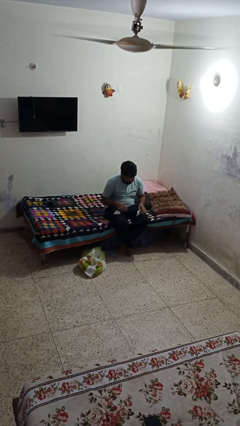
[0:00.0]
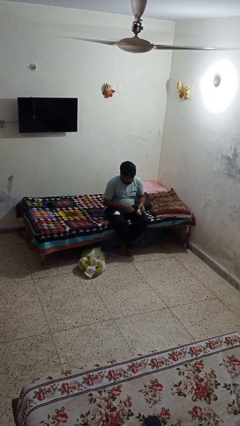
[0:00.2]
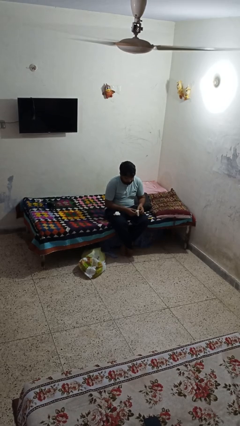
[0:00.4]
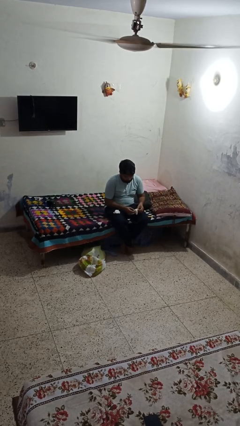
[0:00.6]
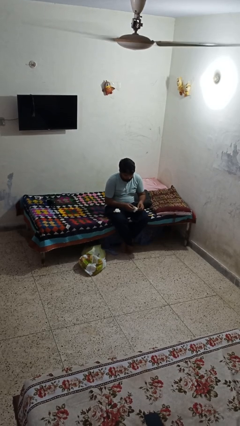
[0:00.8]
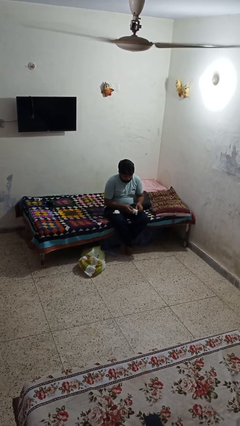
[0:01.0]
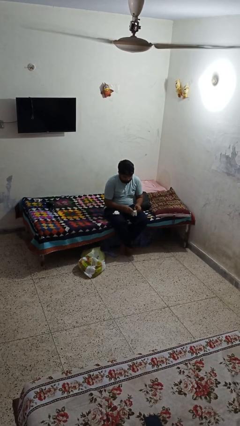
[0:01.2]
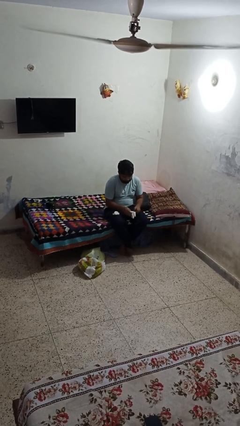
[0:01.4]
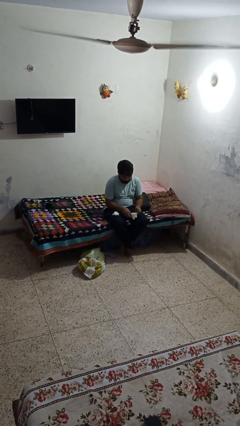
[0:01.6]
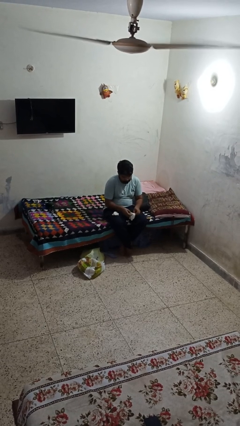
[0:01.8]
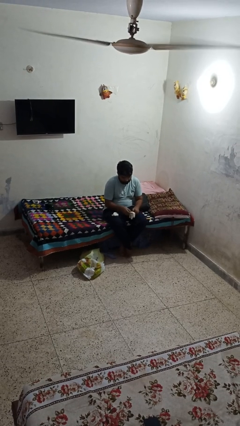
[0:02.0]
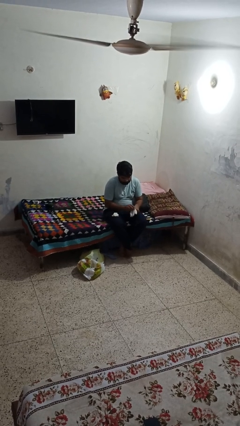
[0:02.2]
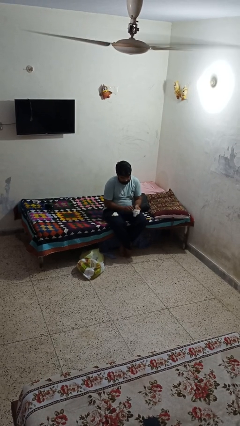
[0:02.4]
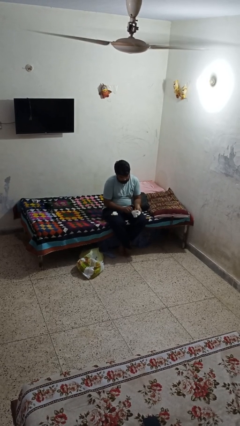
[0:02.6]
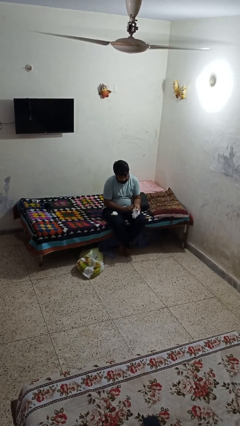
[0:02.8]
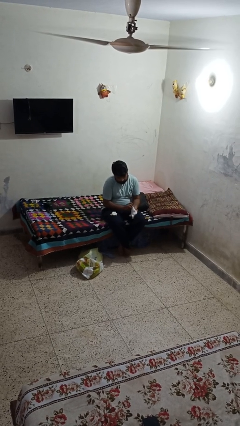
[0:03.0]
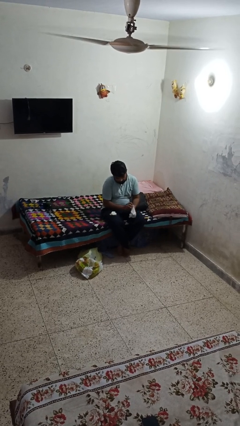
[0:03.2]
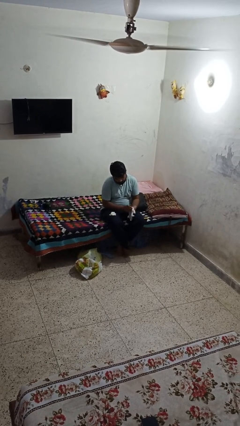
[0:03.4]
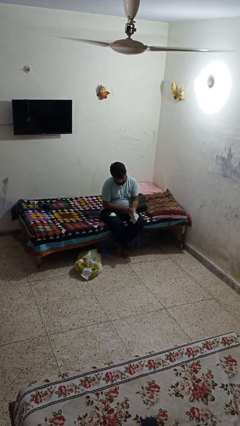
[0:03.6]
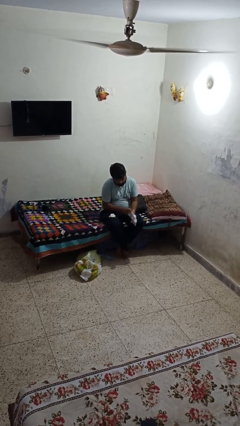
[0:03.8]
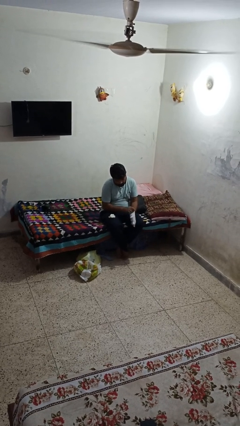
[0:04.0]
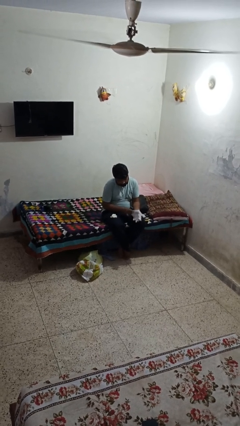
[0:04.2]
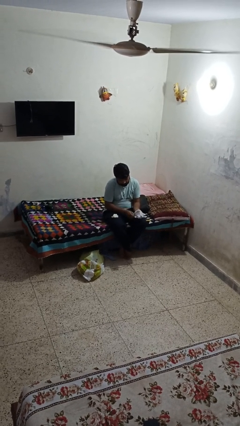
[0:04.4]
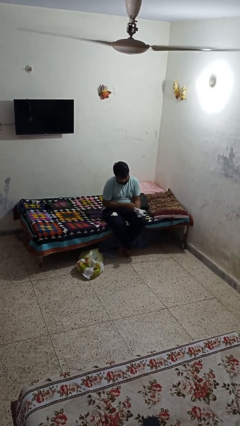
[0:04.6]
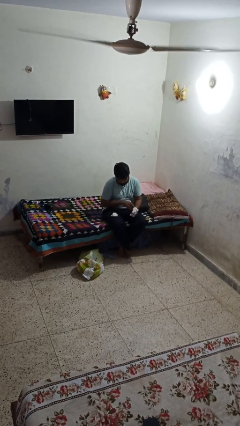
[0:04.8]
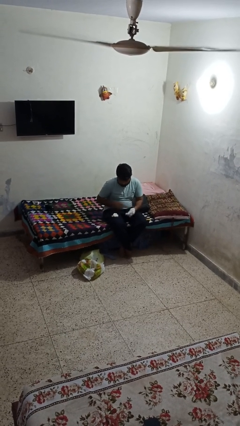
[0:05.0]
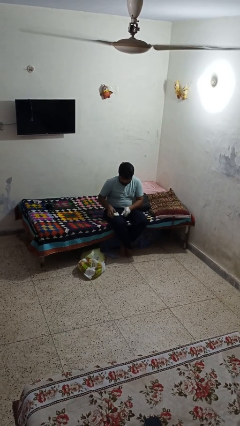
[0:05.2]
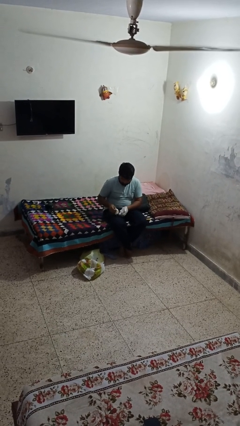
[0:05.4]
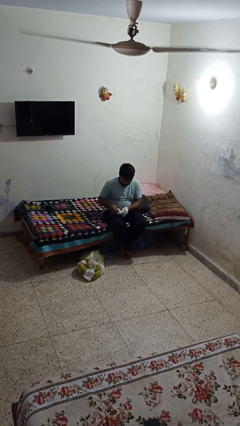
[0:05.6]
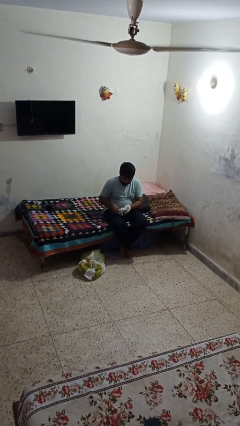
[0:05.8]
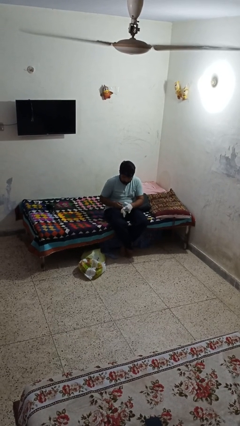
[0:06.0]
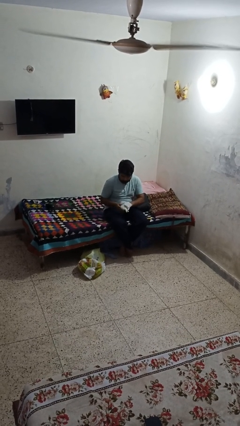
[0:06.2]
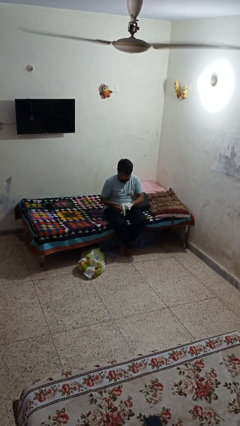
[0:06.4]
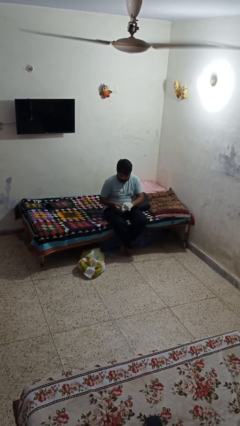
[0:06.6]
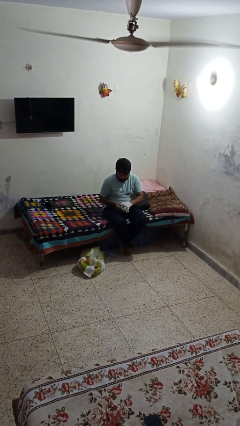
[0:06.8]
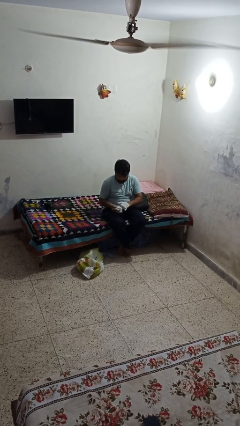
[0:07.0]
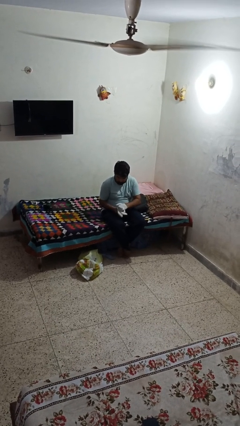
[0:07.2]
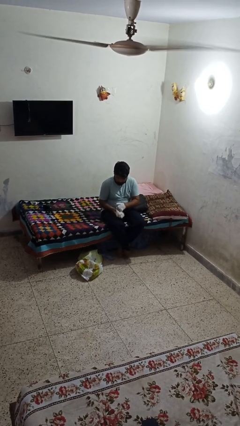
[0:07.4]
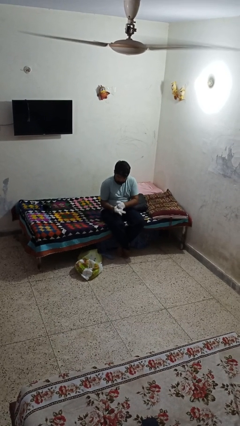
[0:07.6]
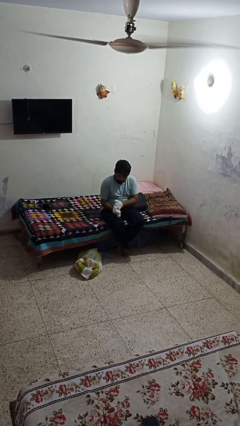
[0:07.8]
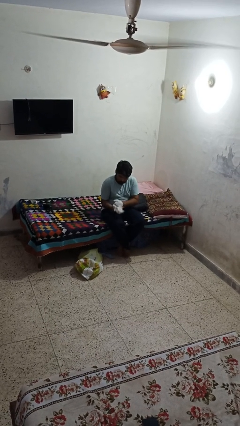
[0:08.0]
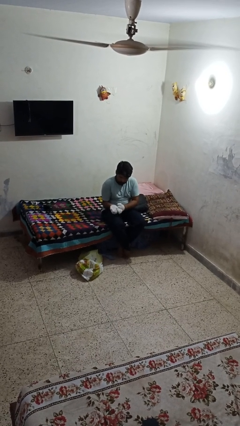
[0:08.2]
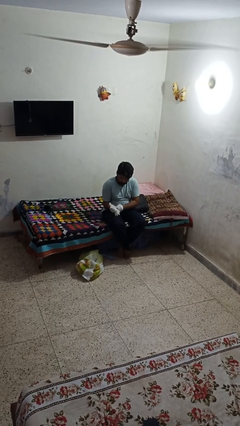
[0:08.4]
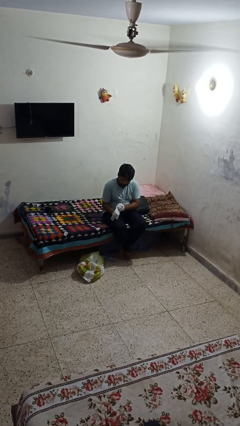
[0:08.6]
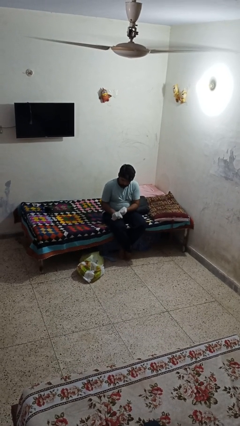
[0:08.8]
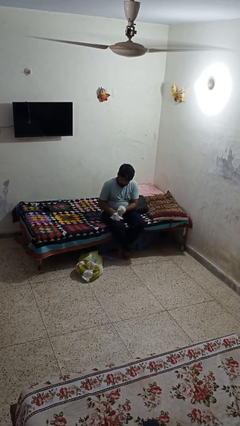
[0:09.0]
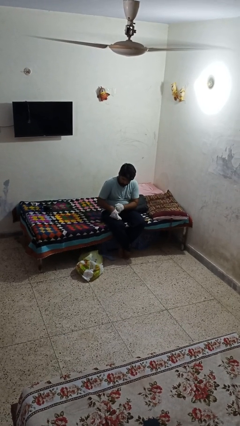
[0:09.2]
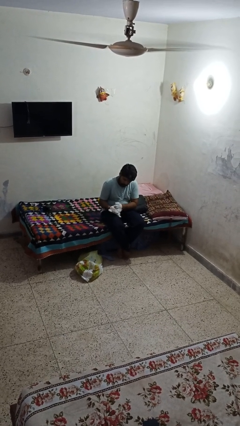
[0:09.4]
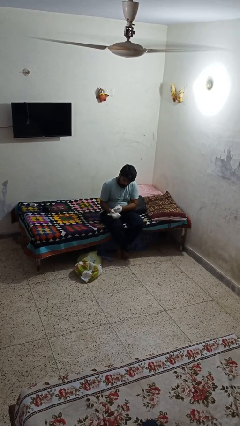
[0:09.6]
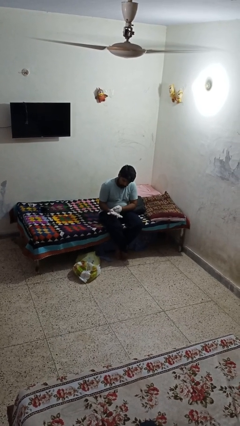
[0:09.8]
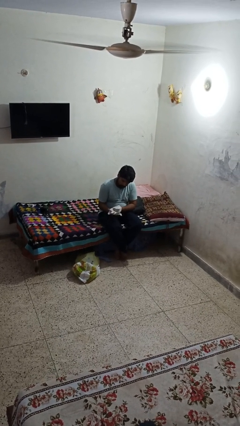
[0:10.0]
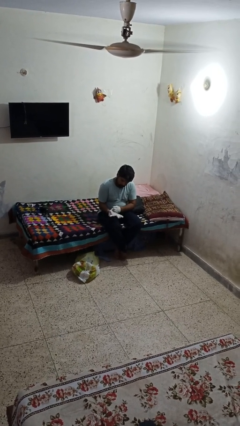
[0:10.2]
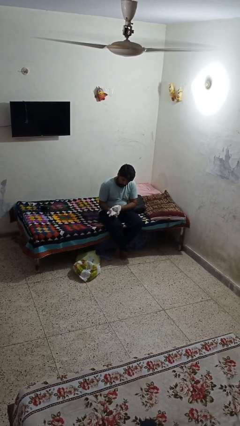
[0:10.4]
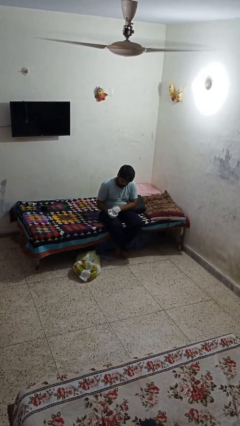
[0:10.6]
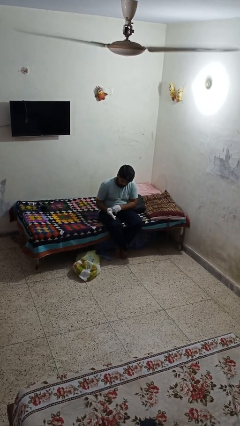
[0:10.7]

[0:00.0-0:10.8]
person puts on gloves

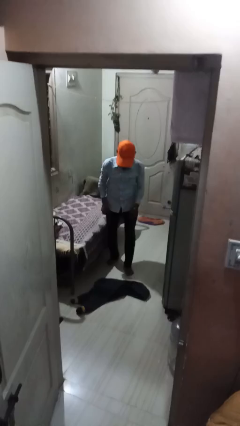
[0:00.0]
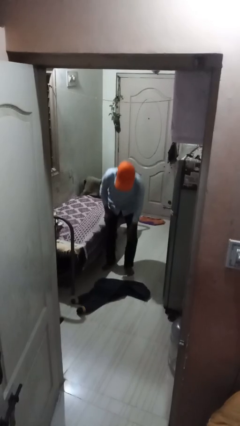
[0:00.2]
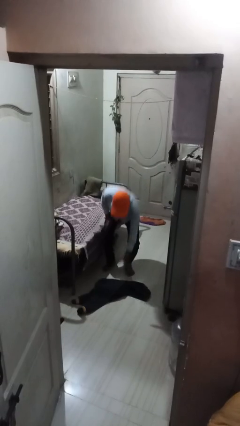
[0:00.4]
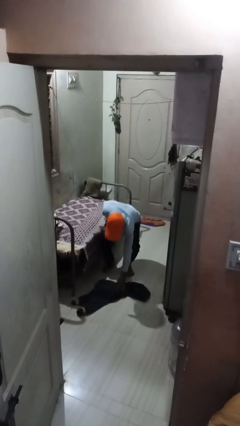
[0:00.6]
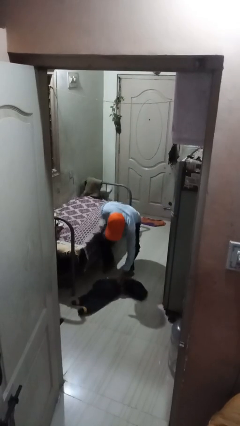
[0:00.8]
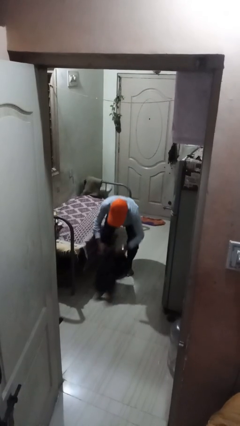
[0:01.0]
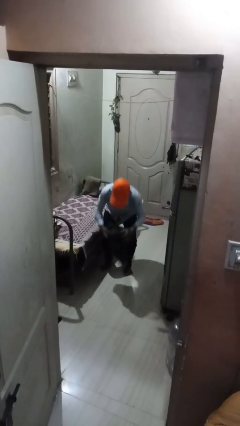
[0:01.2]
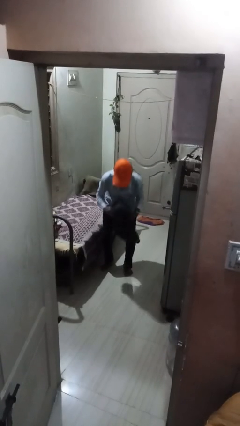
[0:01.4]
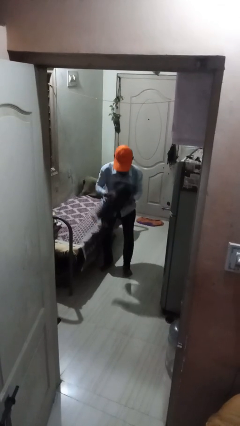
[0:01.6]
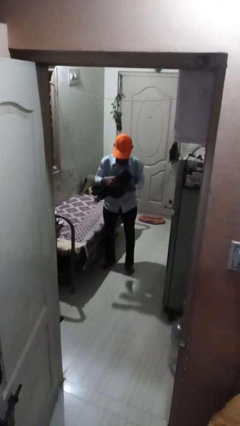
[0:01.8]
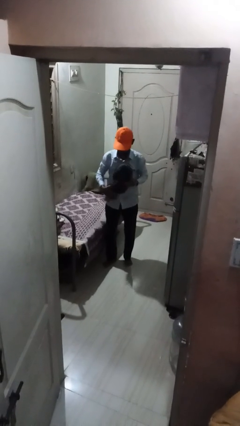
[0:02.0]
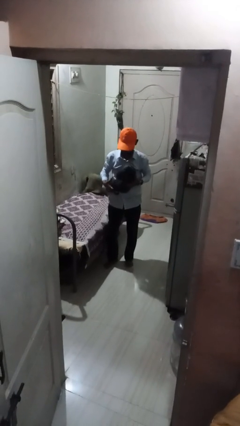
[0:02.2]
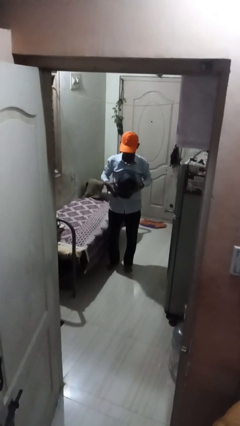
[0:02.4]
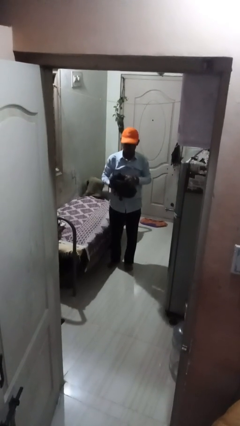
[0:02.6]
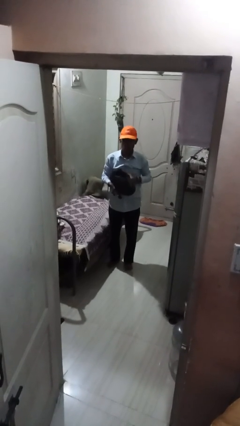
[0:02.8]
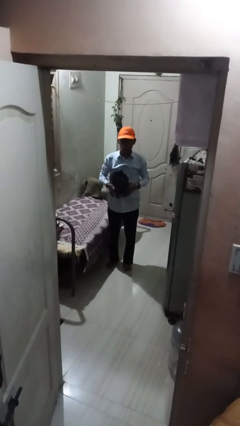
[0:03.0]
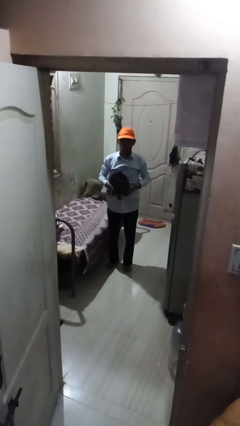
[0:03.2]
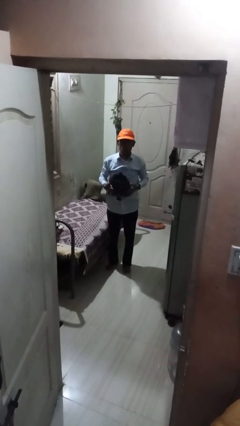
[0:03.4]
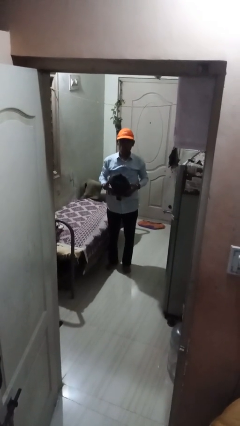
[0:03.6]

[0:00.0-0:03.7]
person picks up object from floor

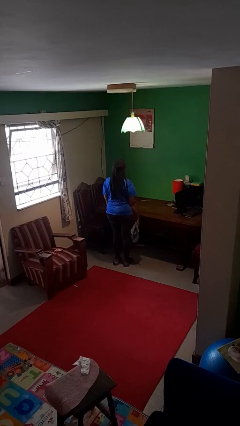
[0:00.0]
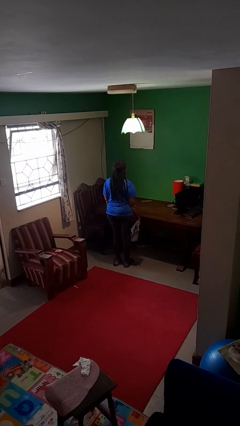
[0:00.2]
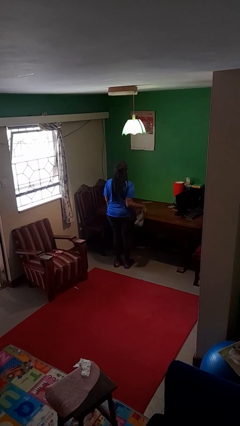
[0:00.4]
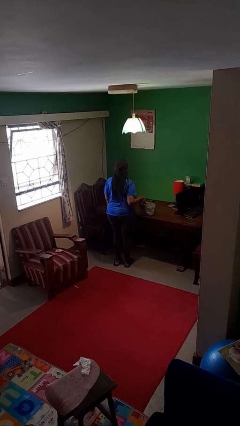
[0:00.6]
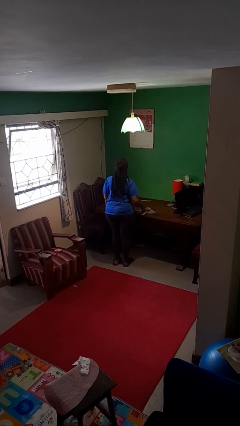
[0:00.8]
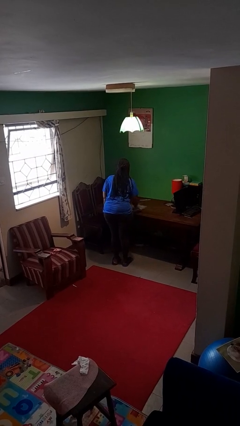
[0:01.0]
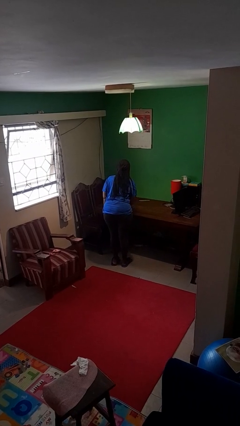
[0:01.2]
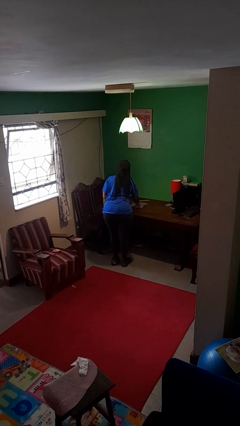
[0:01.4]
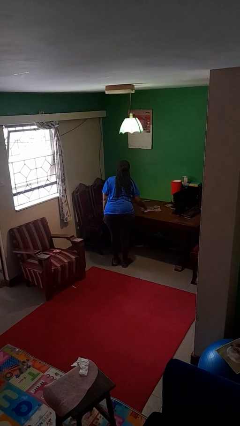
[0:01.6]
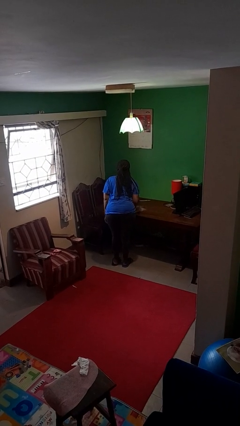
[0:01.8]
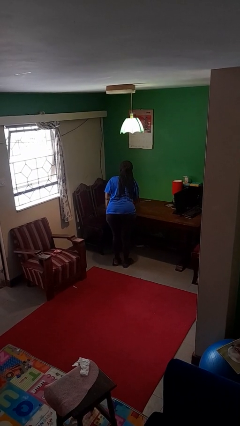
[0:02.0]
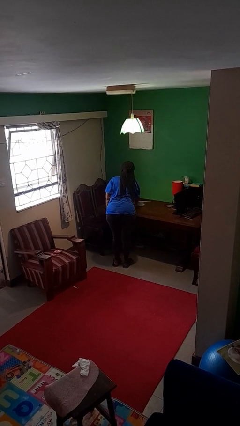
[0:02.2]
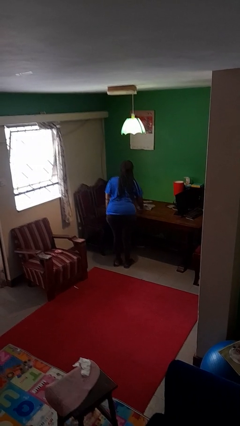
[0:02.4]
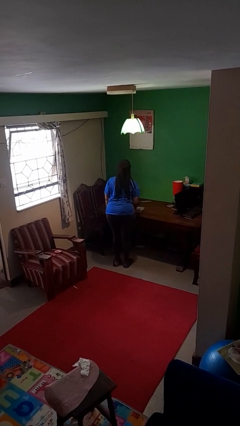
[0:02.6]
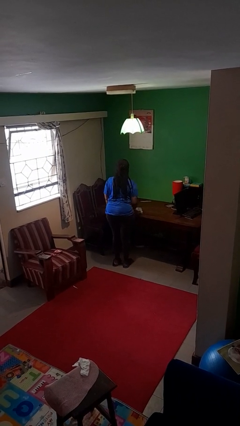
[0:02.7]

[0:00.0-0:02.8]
person cleans table with rag

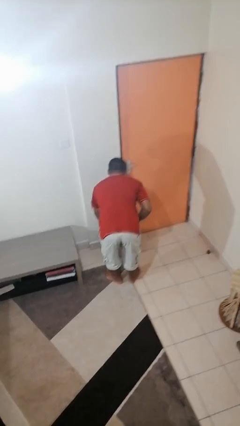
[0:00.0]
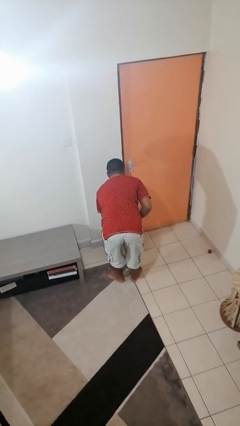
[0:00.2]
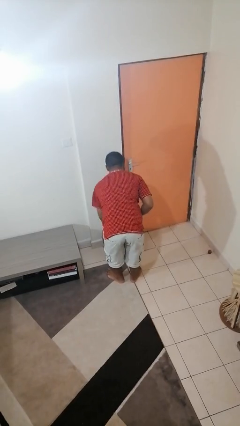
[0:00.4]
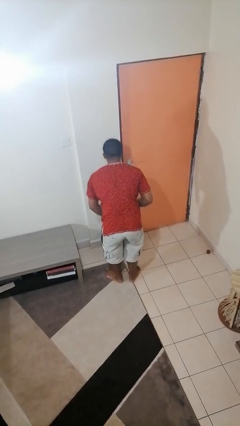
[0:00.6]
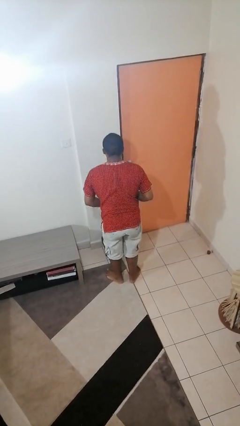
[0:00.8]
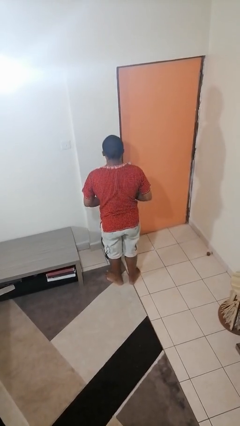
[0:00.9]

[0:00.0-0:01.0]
person discards trash
